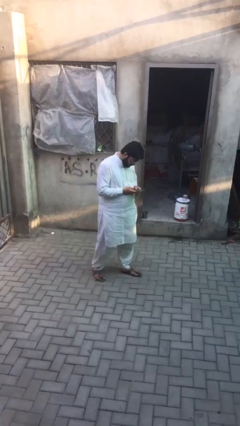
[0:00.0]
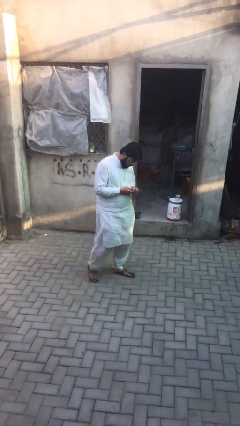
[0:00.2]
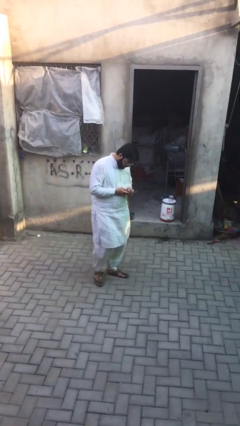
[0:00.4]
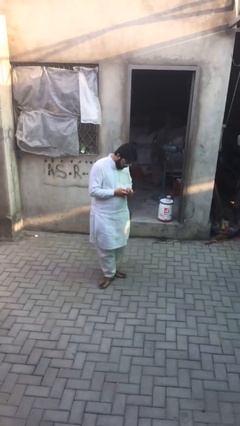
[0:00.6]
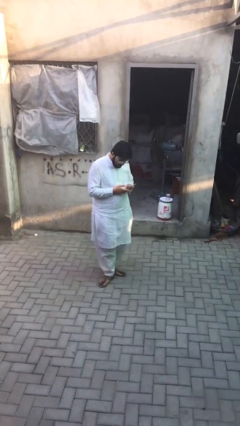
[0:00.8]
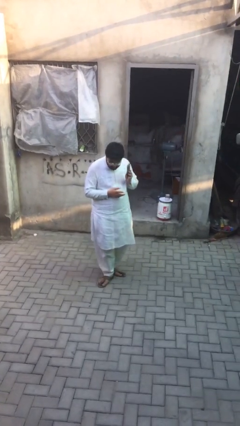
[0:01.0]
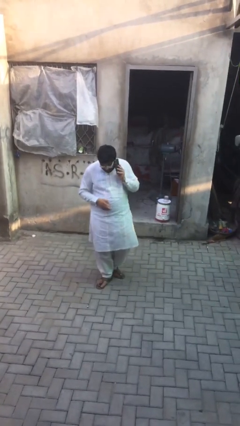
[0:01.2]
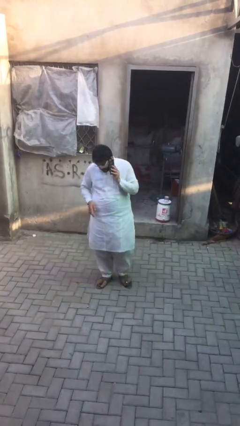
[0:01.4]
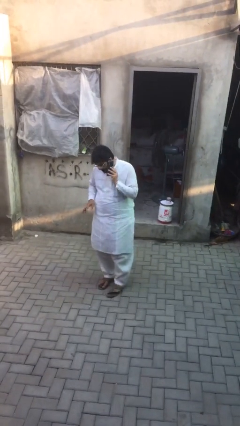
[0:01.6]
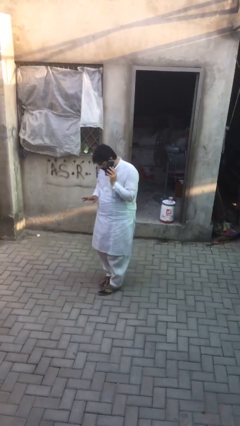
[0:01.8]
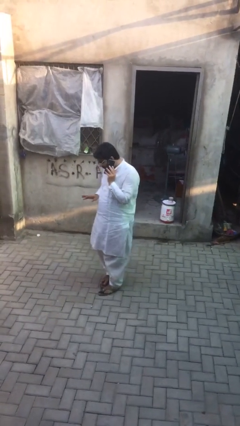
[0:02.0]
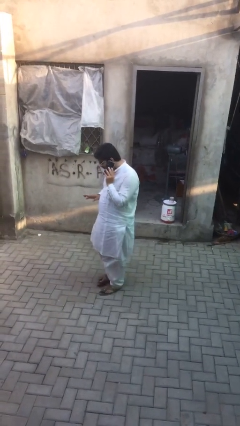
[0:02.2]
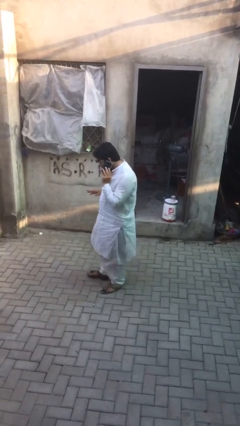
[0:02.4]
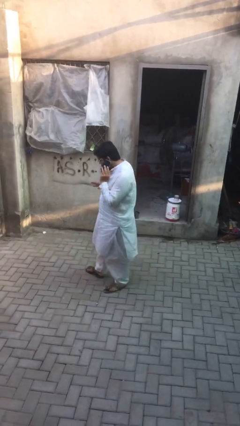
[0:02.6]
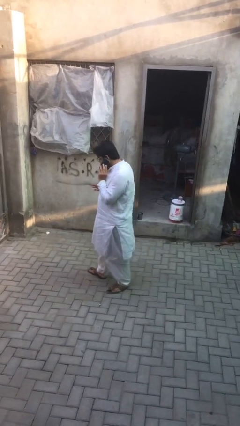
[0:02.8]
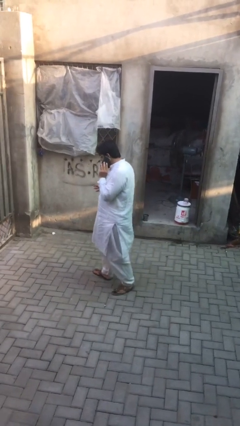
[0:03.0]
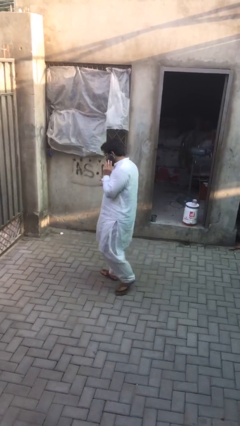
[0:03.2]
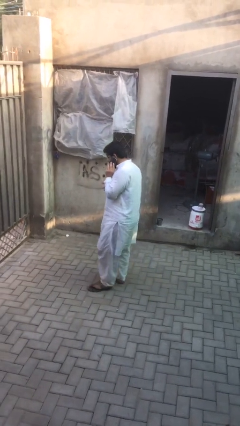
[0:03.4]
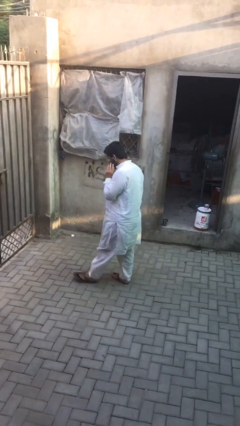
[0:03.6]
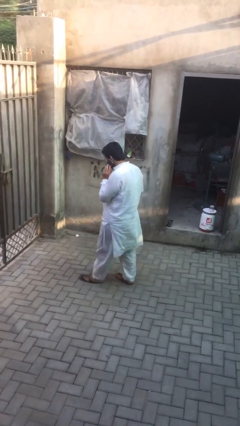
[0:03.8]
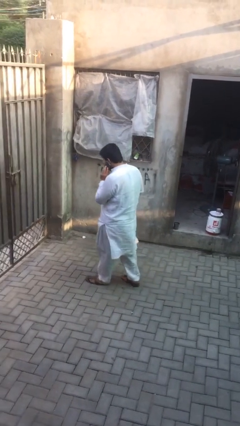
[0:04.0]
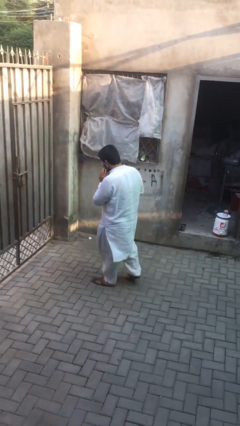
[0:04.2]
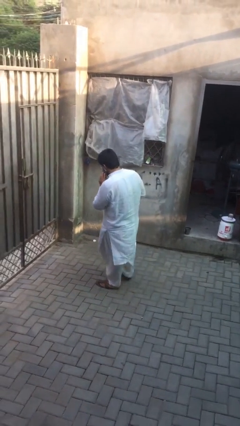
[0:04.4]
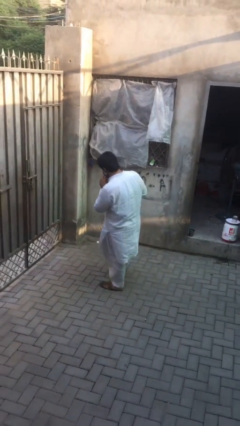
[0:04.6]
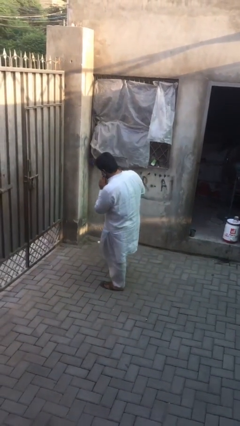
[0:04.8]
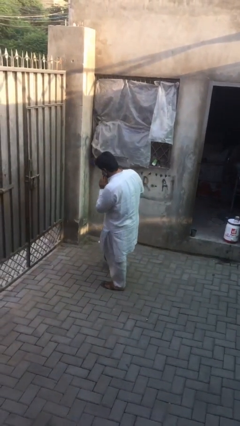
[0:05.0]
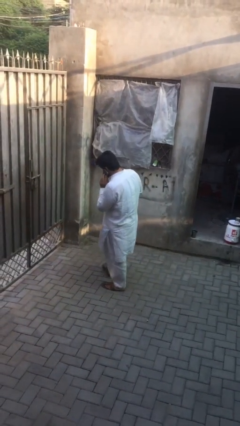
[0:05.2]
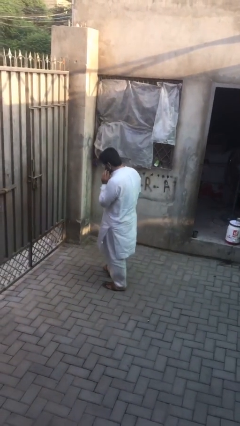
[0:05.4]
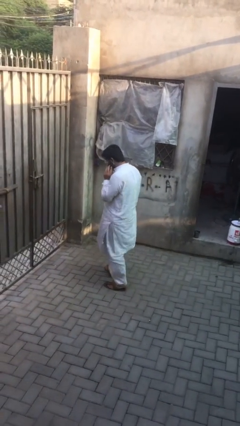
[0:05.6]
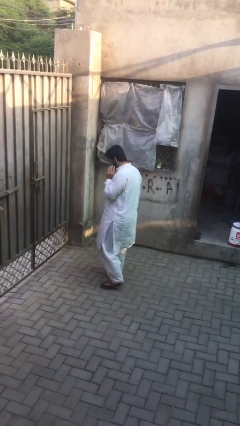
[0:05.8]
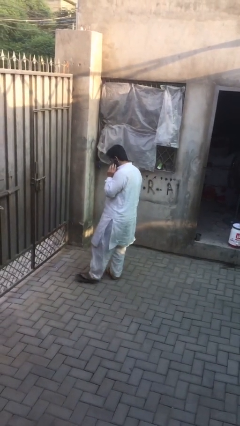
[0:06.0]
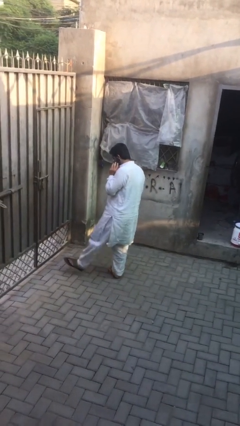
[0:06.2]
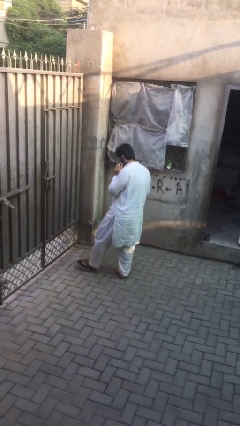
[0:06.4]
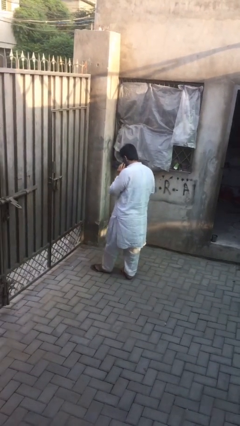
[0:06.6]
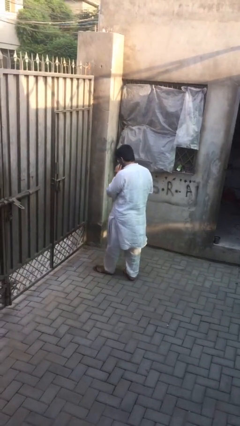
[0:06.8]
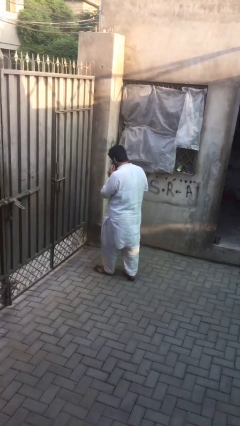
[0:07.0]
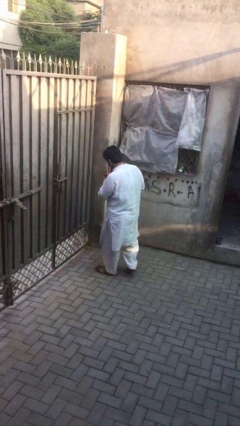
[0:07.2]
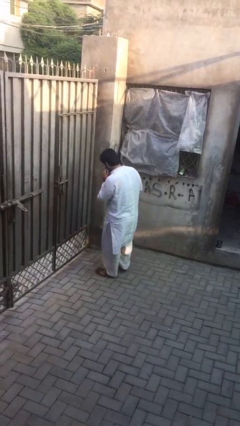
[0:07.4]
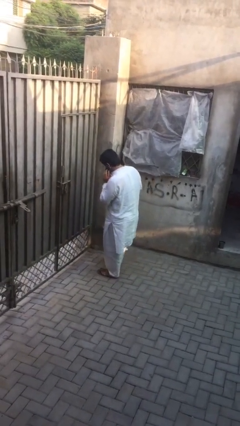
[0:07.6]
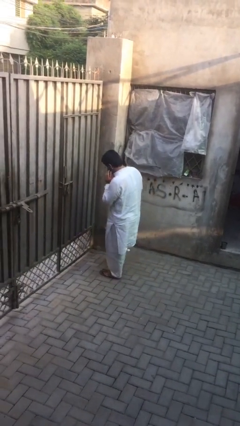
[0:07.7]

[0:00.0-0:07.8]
person talks on phone

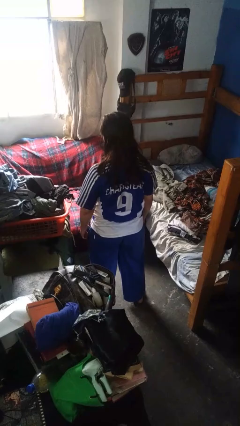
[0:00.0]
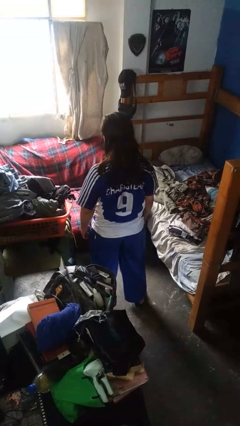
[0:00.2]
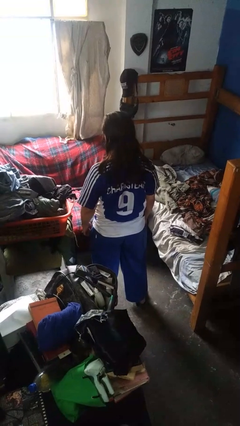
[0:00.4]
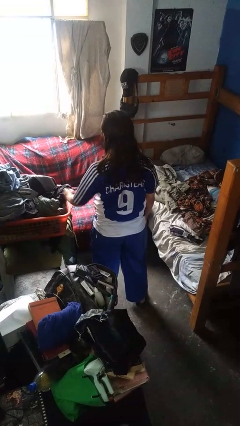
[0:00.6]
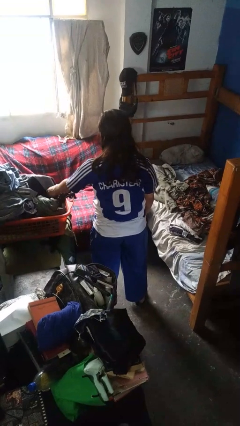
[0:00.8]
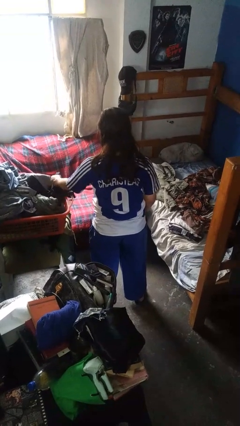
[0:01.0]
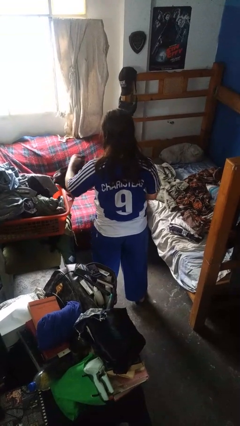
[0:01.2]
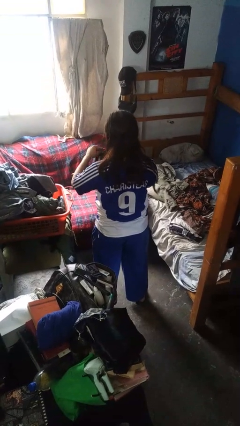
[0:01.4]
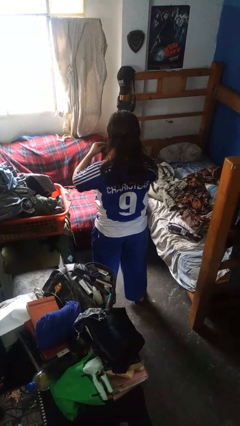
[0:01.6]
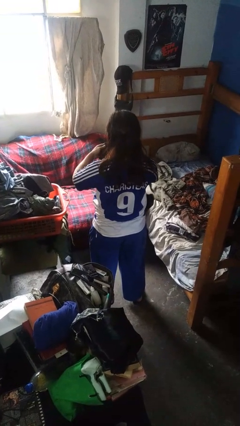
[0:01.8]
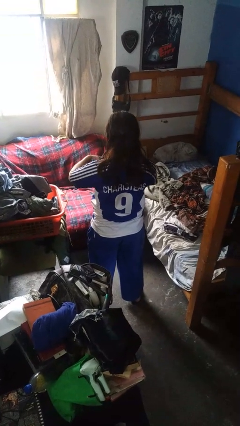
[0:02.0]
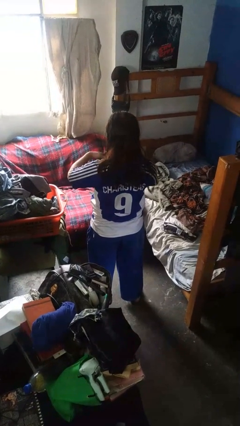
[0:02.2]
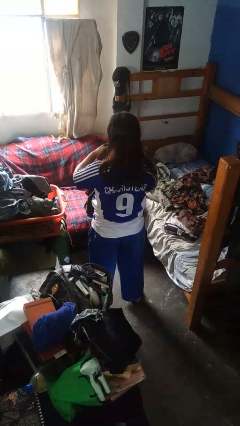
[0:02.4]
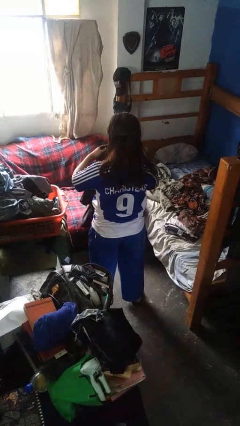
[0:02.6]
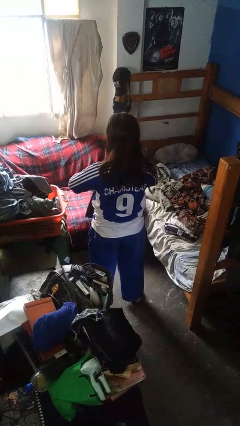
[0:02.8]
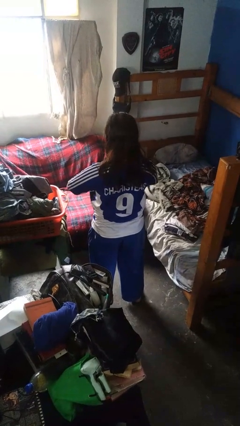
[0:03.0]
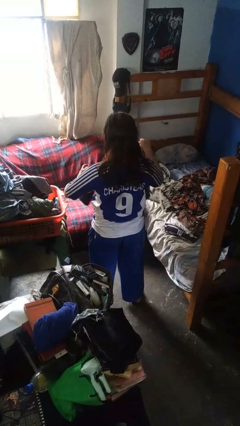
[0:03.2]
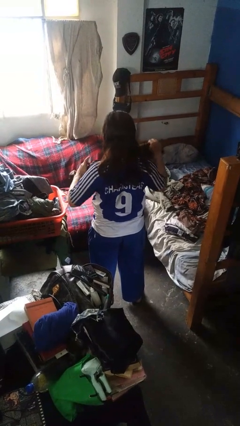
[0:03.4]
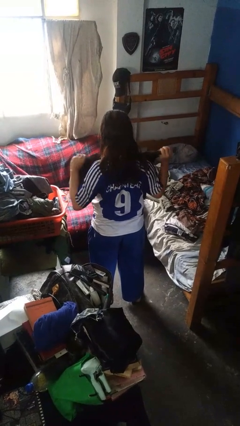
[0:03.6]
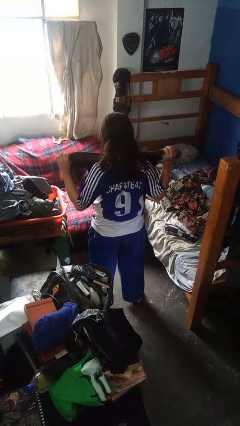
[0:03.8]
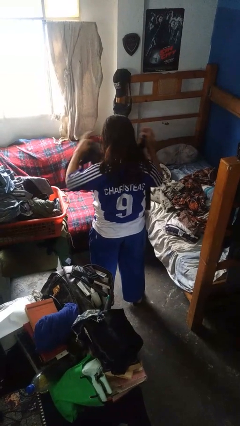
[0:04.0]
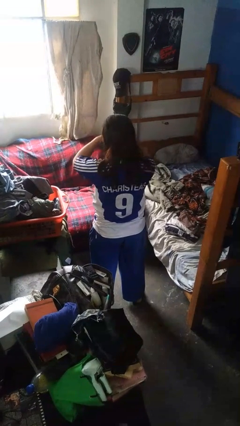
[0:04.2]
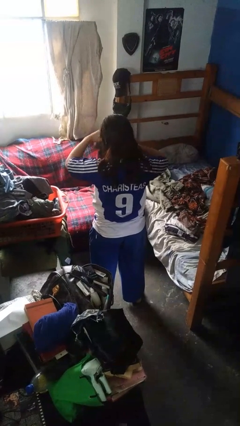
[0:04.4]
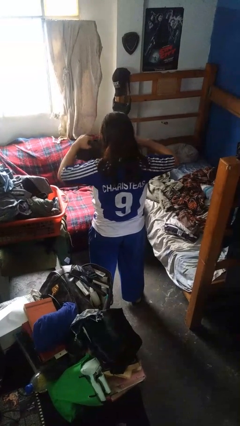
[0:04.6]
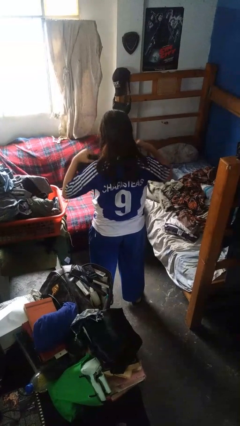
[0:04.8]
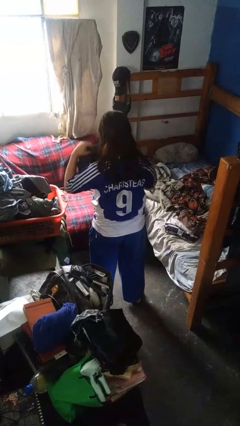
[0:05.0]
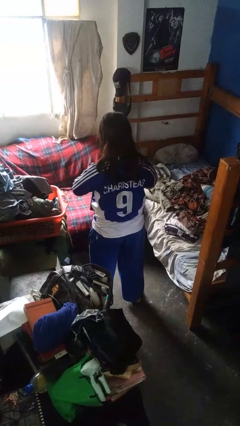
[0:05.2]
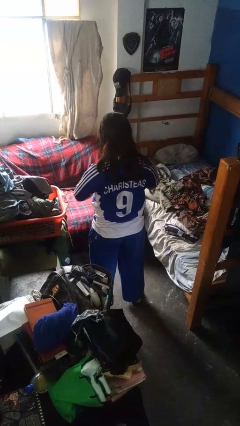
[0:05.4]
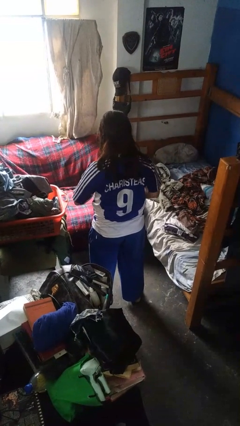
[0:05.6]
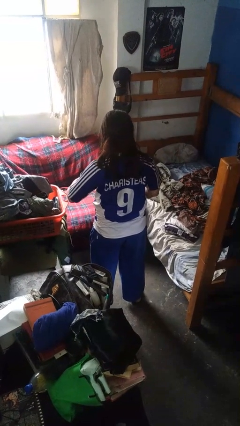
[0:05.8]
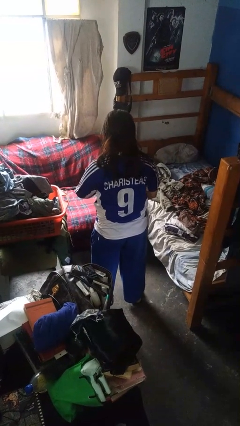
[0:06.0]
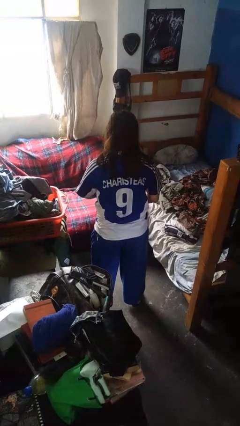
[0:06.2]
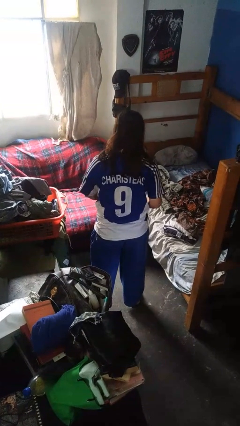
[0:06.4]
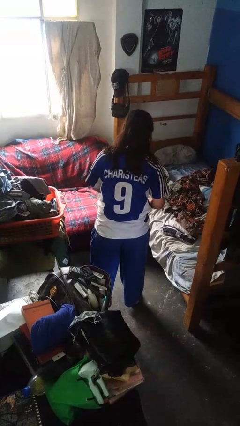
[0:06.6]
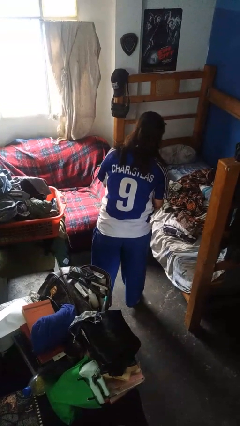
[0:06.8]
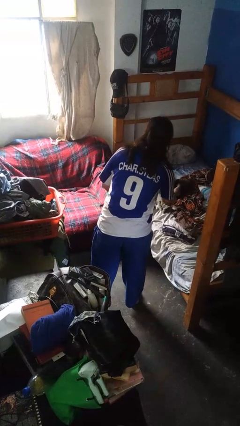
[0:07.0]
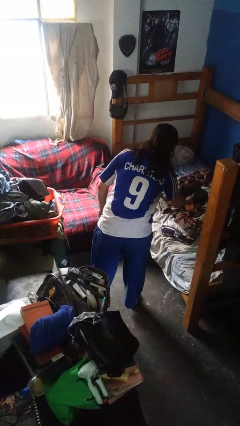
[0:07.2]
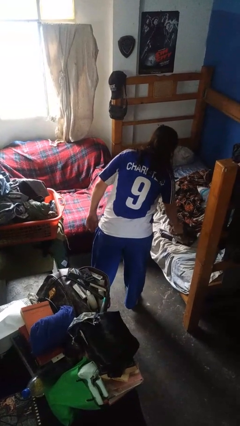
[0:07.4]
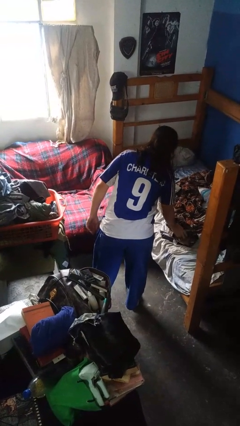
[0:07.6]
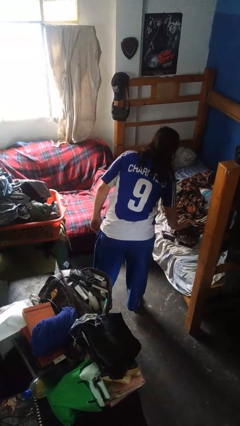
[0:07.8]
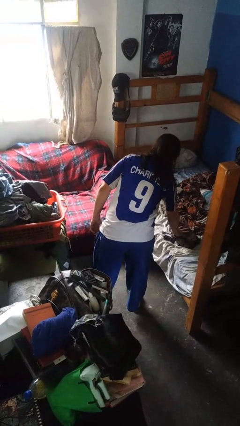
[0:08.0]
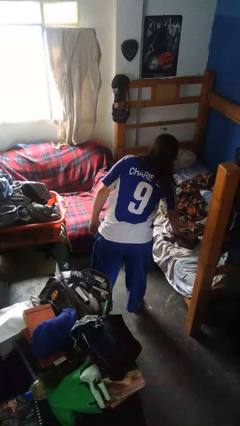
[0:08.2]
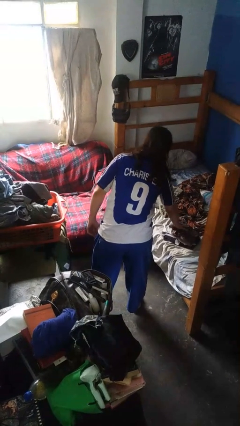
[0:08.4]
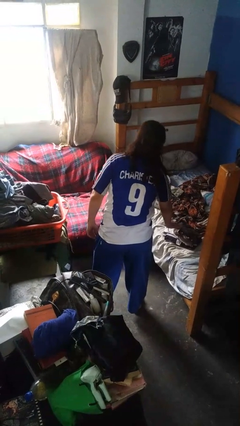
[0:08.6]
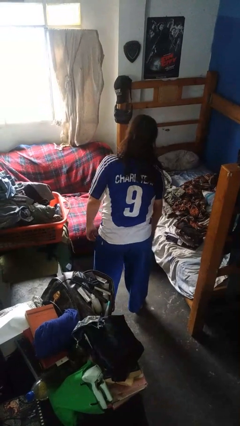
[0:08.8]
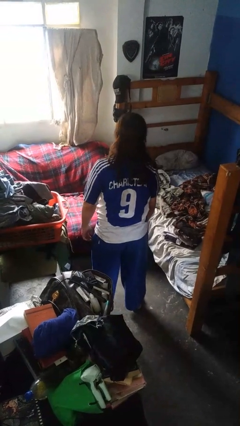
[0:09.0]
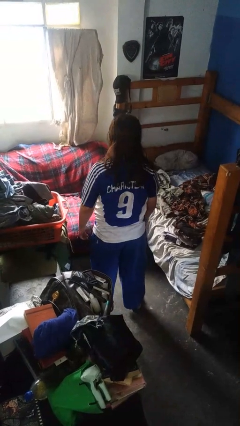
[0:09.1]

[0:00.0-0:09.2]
person folds shirt

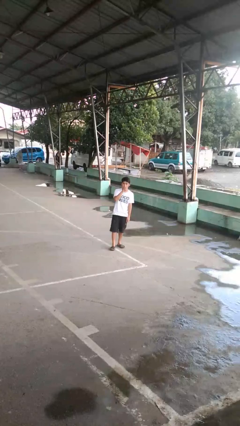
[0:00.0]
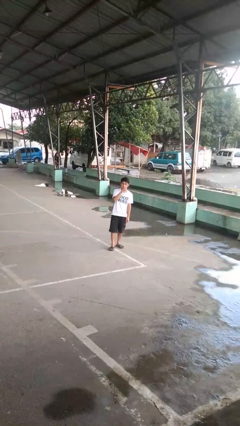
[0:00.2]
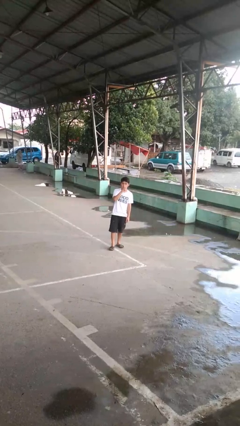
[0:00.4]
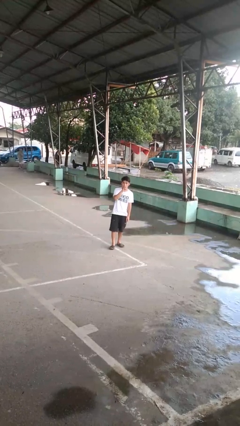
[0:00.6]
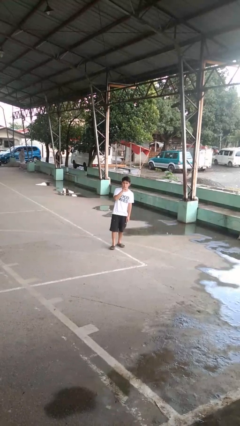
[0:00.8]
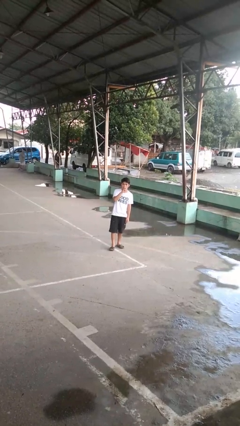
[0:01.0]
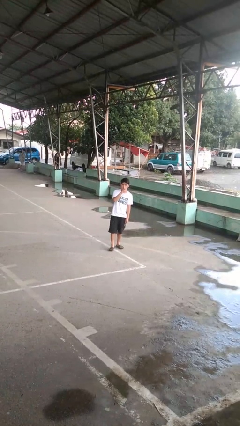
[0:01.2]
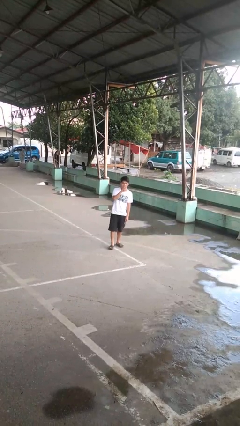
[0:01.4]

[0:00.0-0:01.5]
person gestures be quiet
